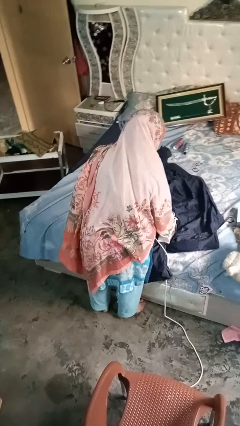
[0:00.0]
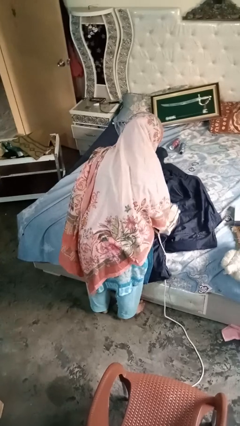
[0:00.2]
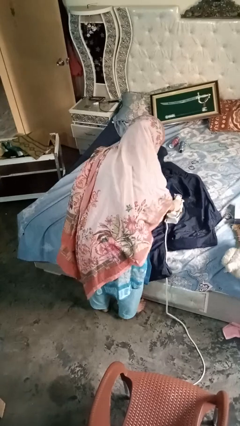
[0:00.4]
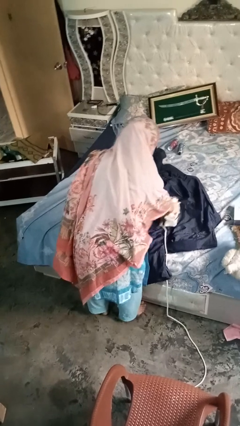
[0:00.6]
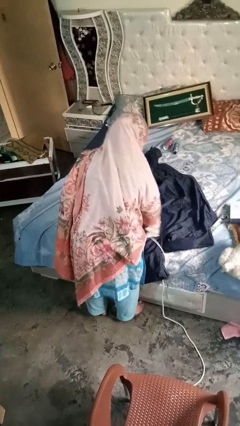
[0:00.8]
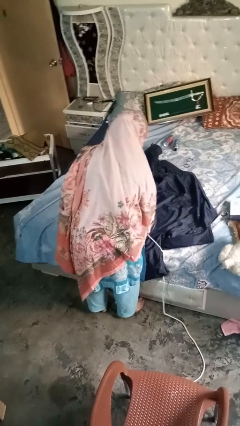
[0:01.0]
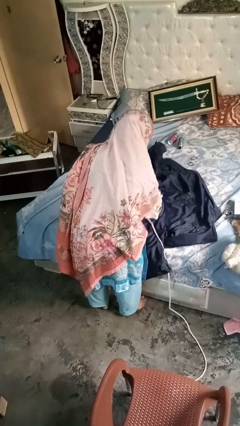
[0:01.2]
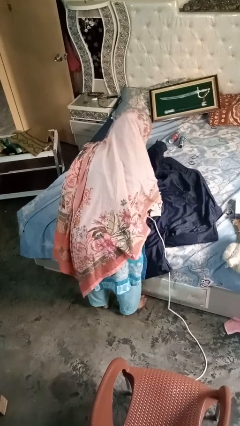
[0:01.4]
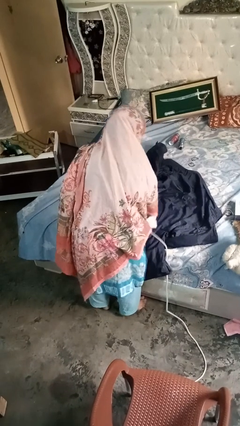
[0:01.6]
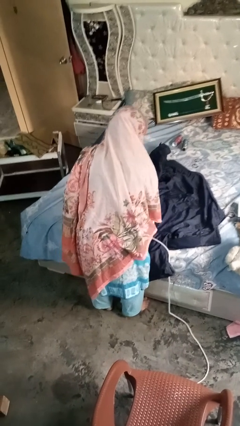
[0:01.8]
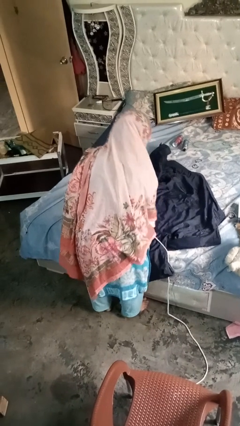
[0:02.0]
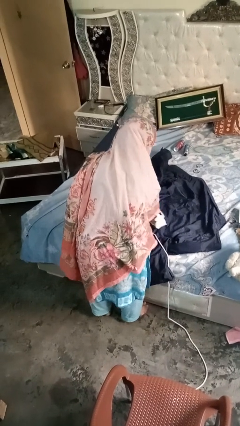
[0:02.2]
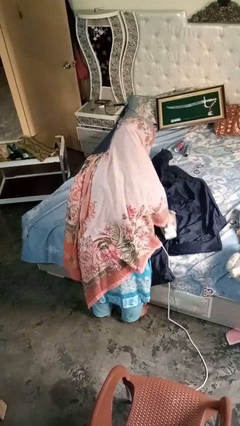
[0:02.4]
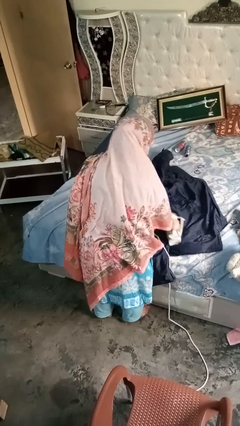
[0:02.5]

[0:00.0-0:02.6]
person irons clothes

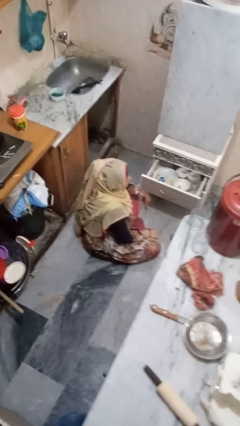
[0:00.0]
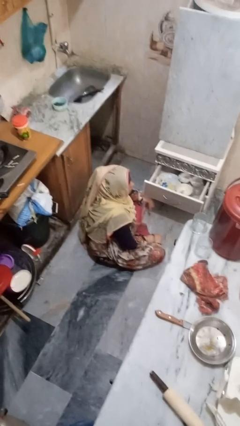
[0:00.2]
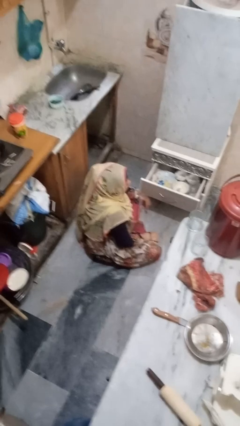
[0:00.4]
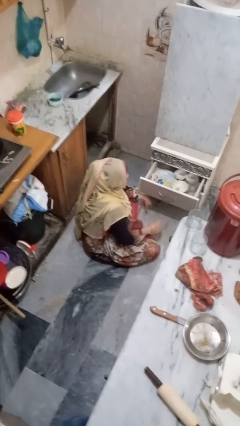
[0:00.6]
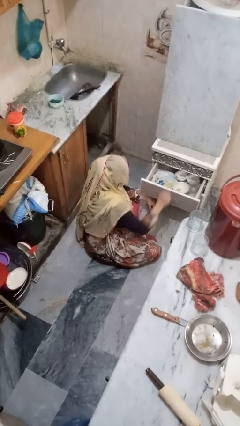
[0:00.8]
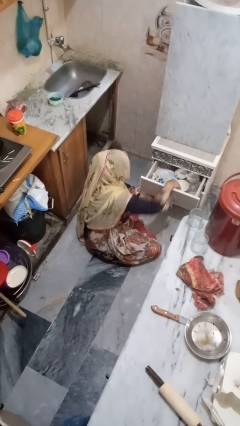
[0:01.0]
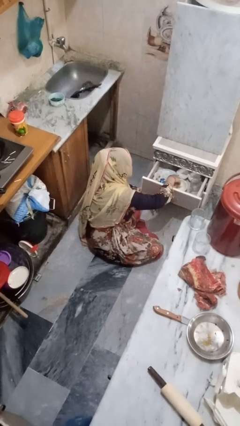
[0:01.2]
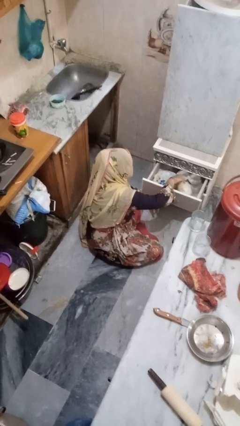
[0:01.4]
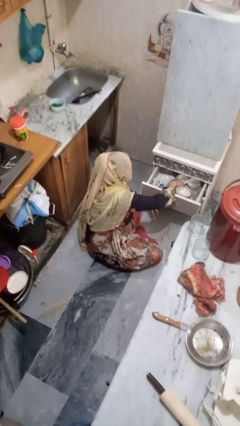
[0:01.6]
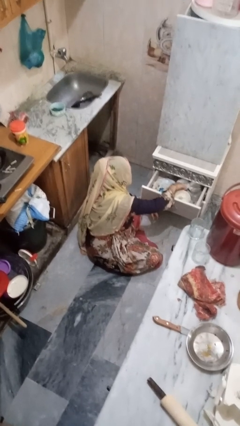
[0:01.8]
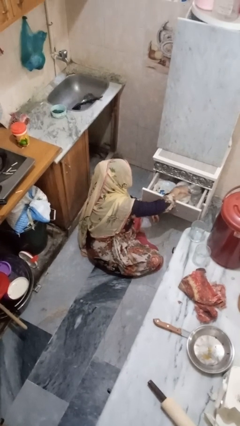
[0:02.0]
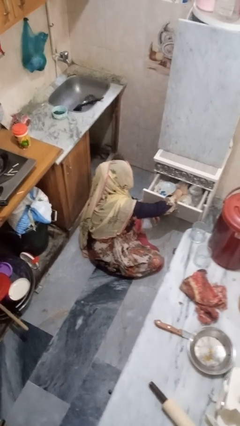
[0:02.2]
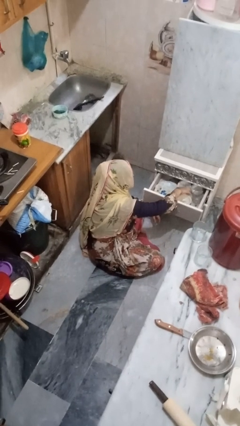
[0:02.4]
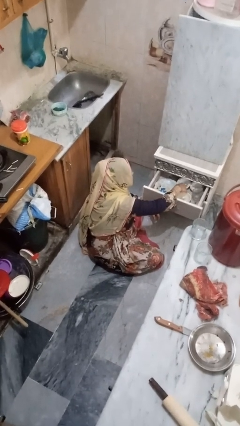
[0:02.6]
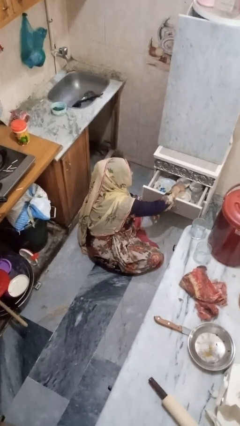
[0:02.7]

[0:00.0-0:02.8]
person searches in kitchen drawer

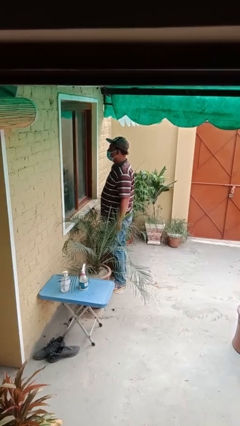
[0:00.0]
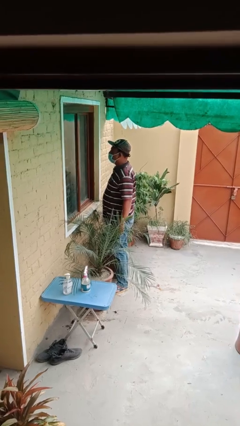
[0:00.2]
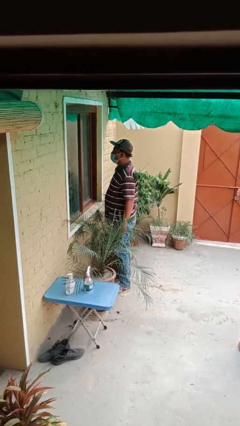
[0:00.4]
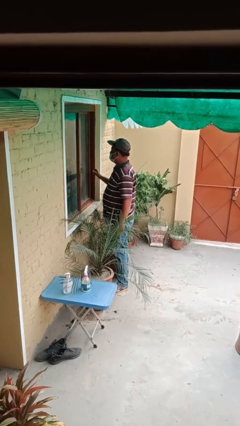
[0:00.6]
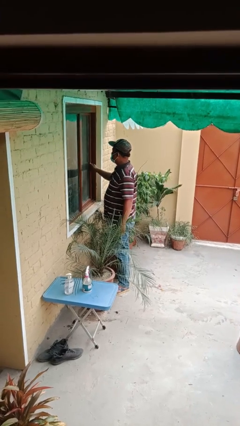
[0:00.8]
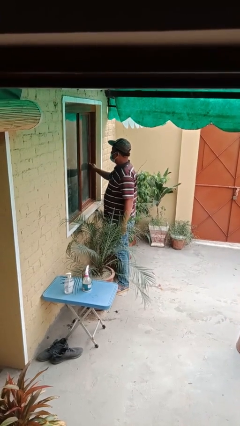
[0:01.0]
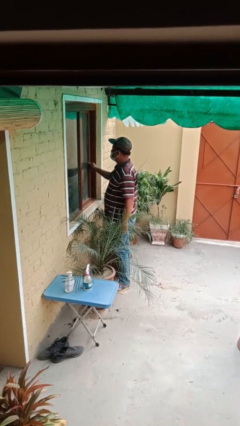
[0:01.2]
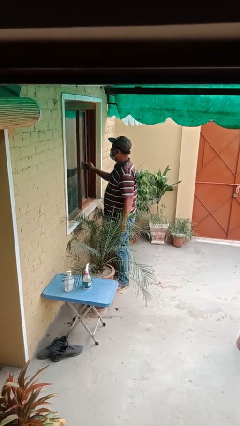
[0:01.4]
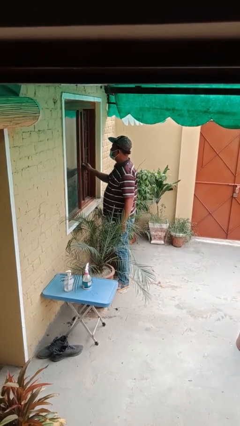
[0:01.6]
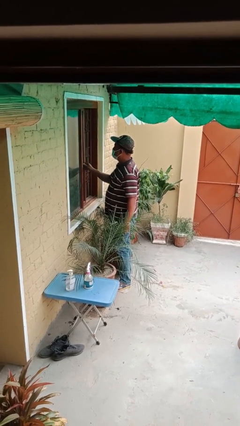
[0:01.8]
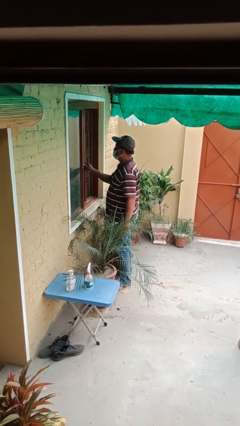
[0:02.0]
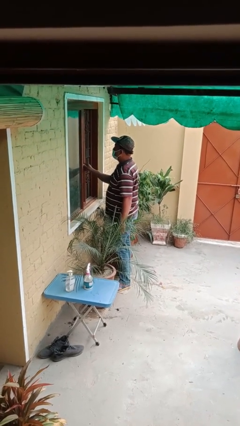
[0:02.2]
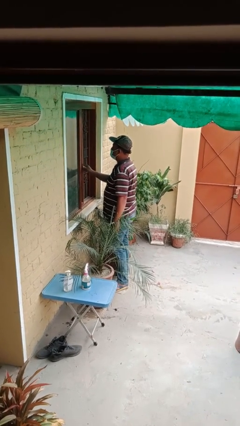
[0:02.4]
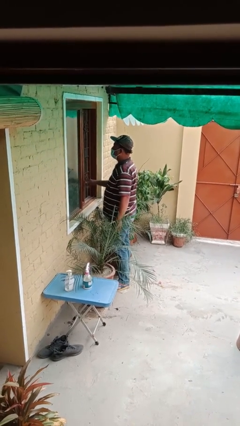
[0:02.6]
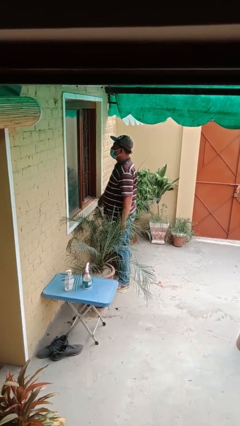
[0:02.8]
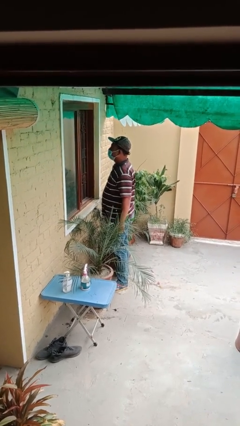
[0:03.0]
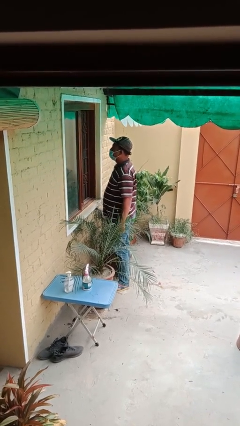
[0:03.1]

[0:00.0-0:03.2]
person opens home window

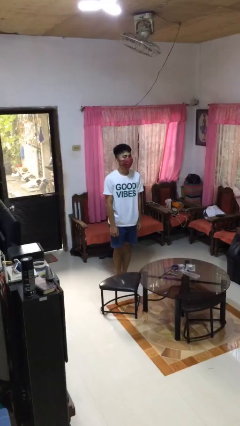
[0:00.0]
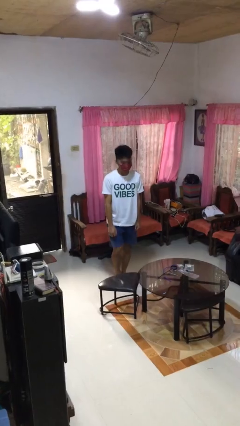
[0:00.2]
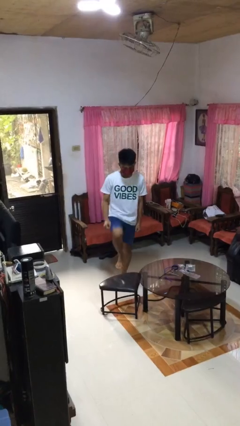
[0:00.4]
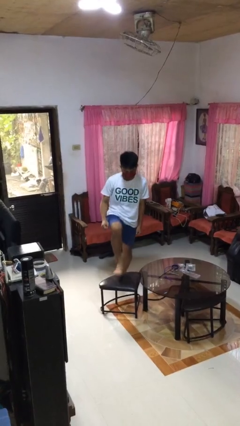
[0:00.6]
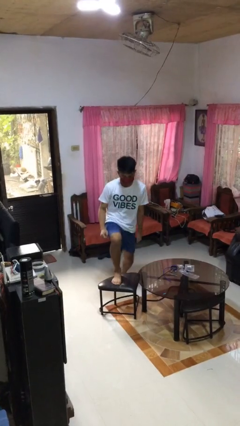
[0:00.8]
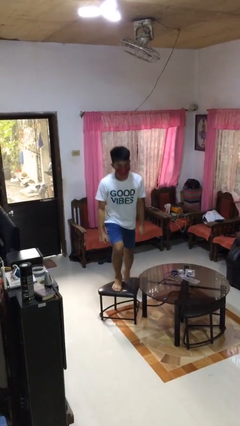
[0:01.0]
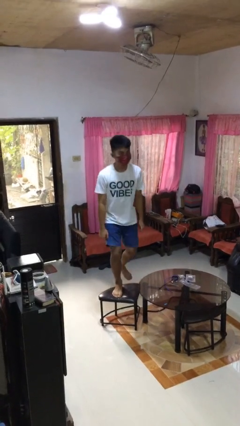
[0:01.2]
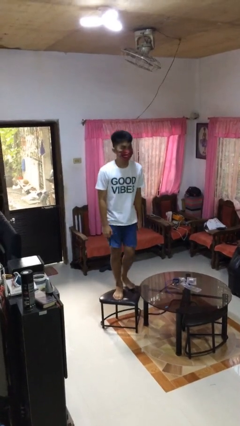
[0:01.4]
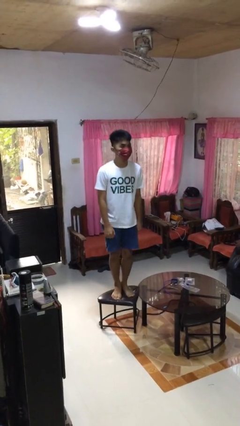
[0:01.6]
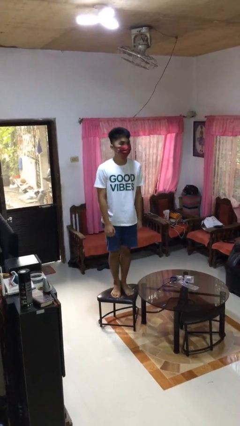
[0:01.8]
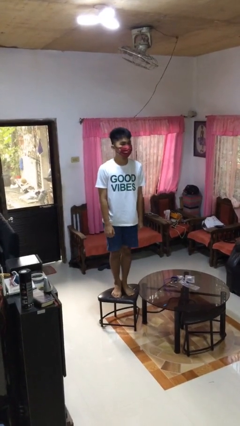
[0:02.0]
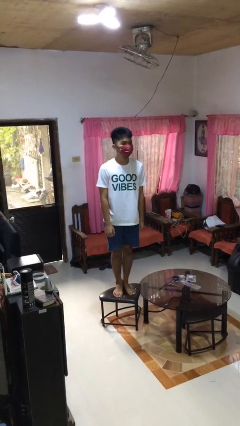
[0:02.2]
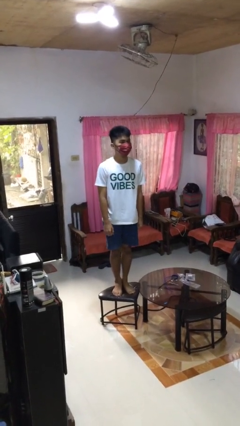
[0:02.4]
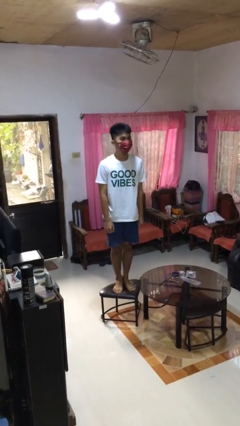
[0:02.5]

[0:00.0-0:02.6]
person climbs on chair

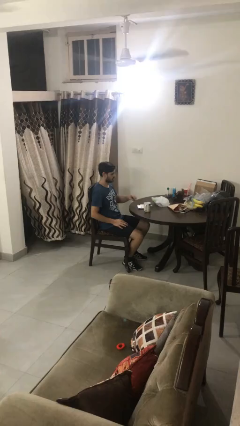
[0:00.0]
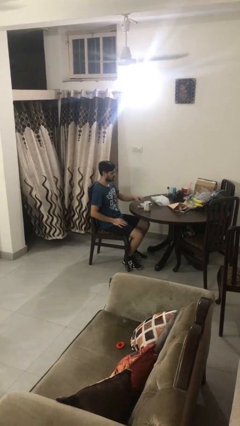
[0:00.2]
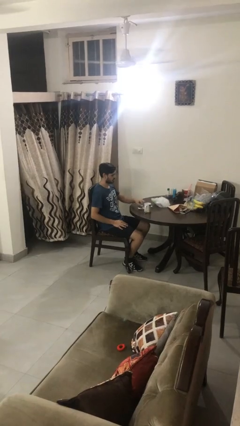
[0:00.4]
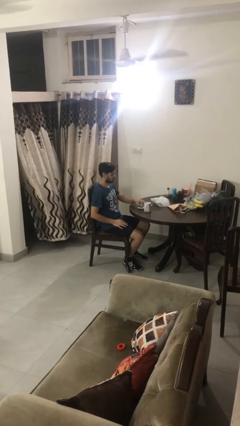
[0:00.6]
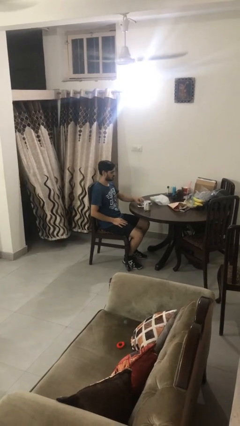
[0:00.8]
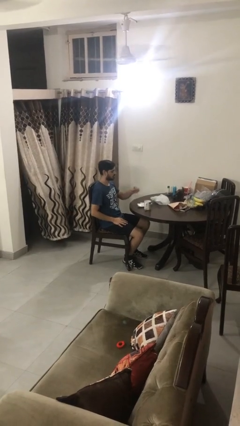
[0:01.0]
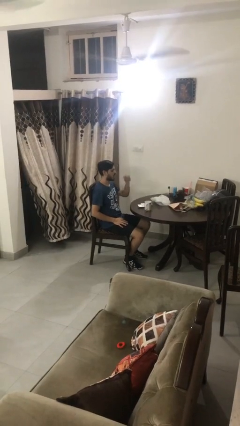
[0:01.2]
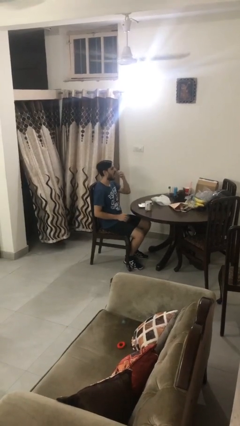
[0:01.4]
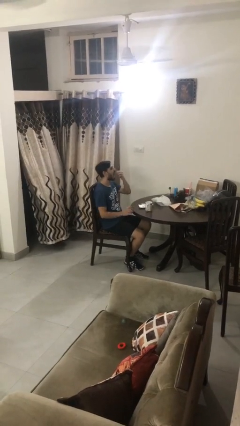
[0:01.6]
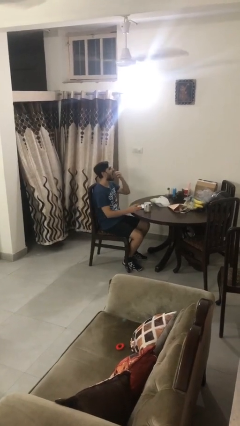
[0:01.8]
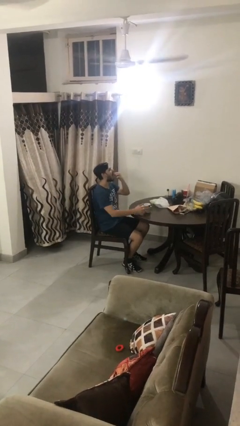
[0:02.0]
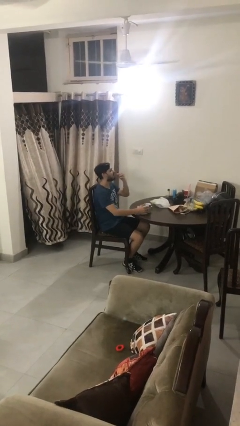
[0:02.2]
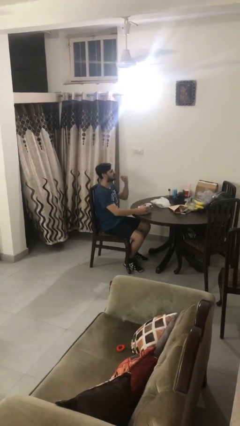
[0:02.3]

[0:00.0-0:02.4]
person takes medicine pills

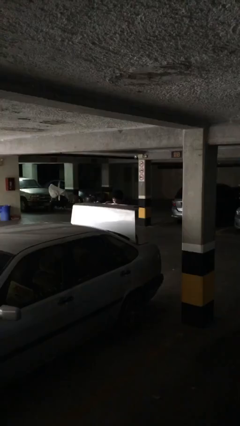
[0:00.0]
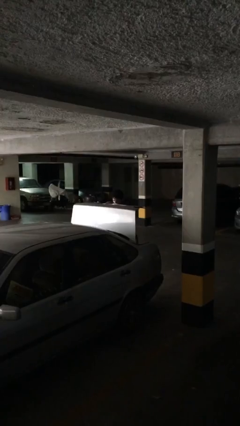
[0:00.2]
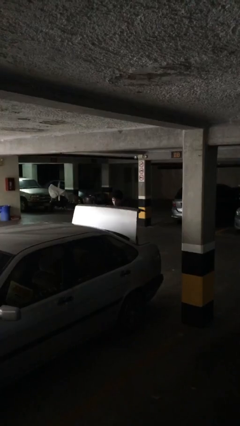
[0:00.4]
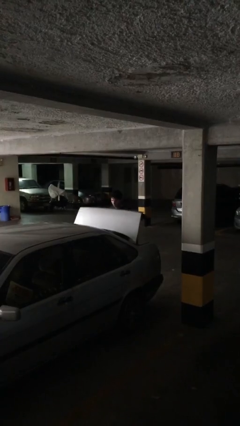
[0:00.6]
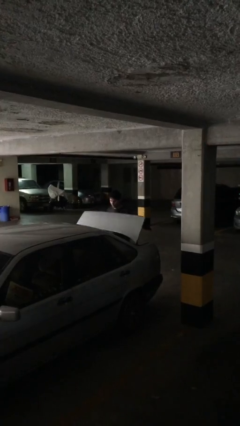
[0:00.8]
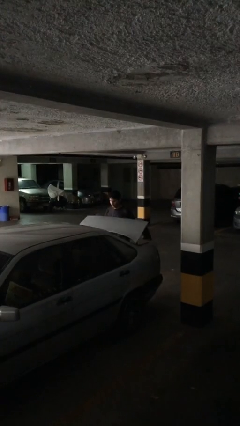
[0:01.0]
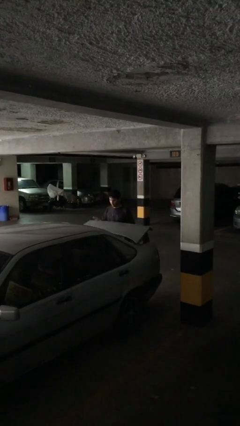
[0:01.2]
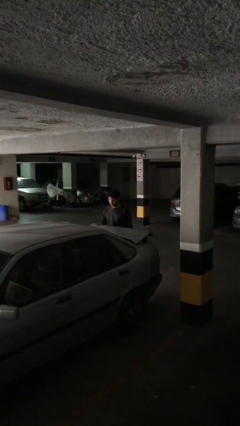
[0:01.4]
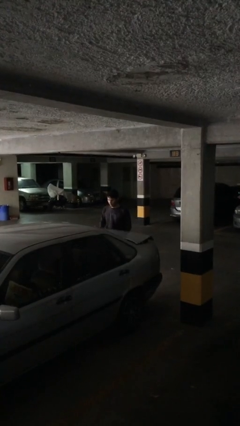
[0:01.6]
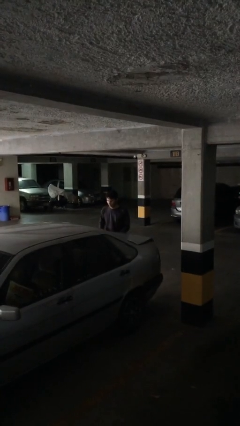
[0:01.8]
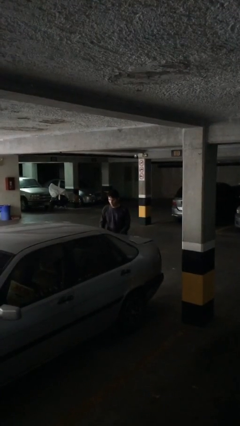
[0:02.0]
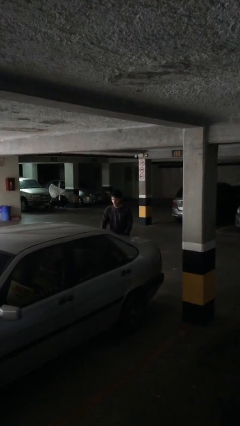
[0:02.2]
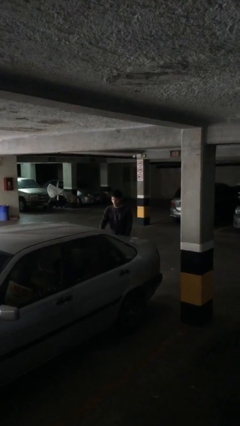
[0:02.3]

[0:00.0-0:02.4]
person closes car trunk

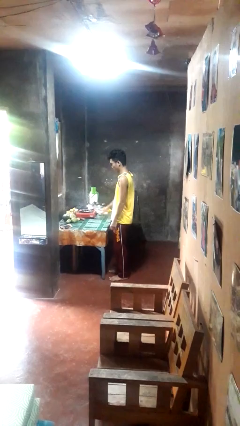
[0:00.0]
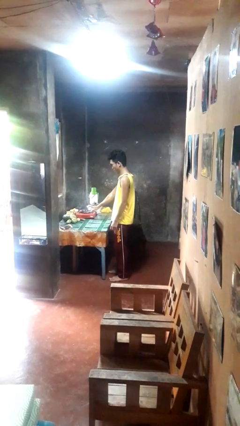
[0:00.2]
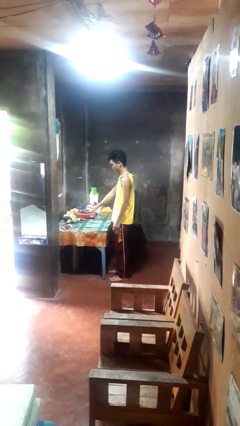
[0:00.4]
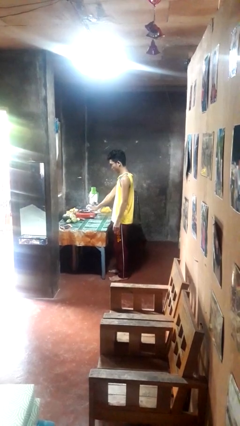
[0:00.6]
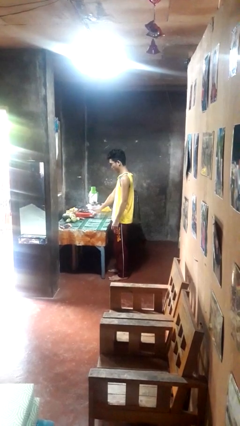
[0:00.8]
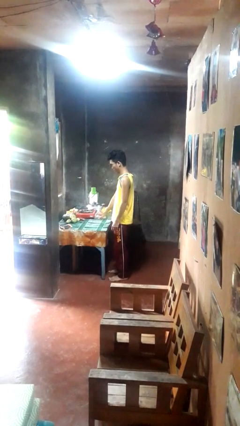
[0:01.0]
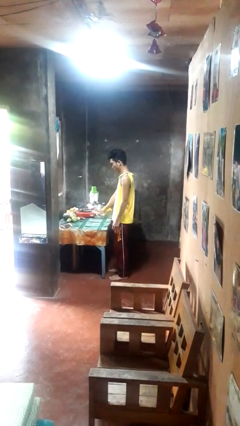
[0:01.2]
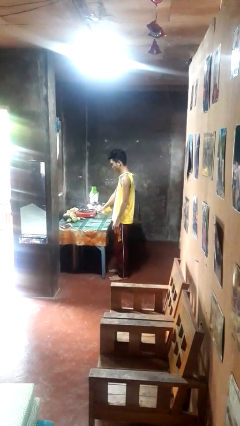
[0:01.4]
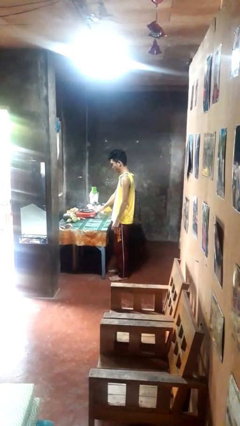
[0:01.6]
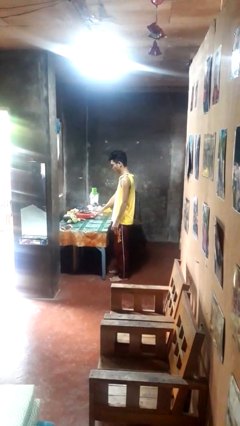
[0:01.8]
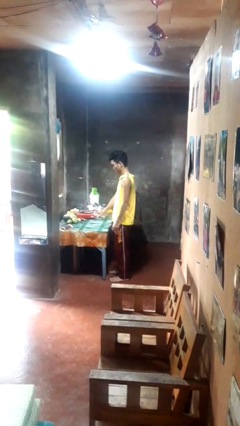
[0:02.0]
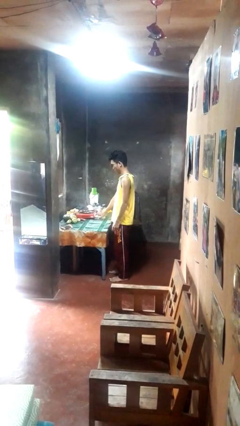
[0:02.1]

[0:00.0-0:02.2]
person sprays from bottle
